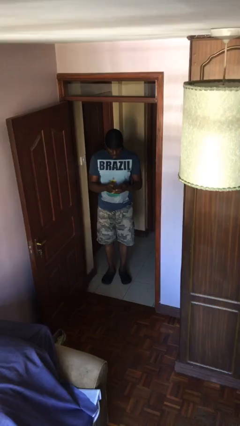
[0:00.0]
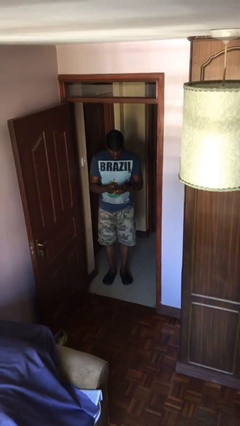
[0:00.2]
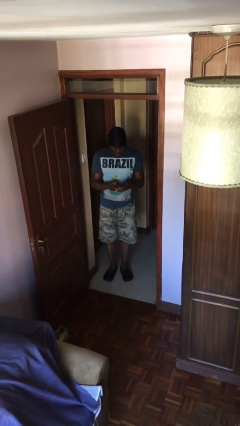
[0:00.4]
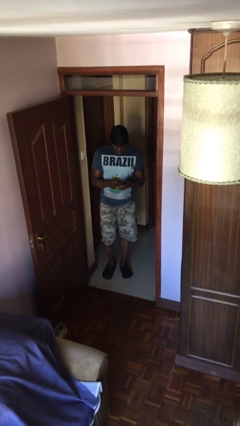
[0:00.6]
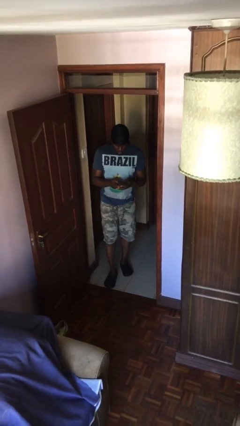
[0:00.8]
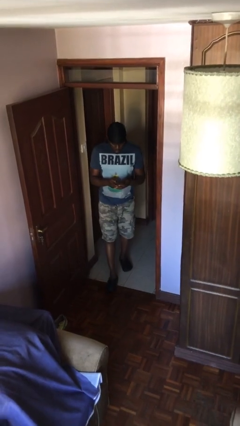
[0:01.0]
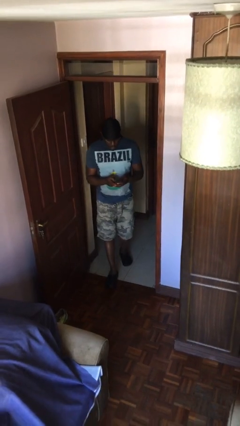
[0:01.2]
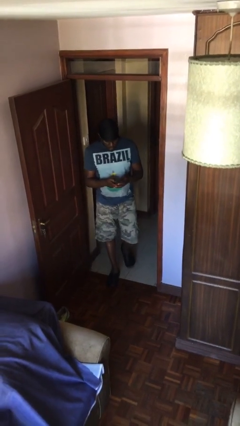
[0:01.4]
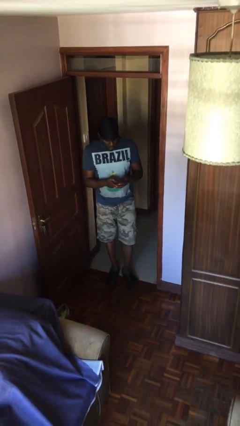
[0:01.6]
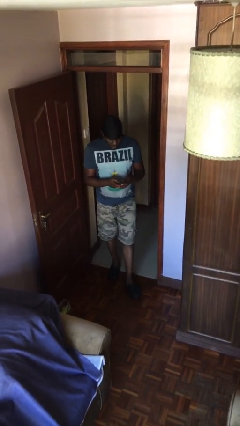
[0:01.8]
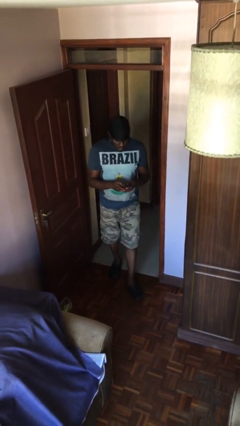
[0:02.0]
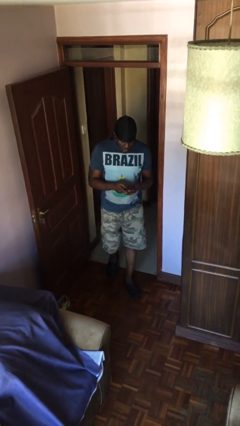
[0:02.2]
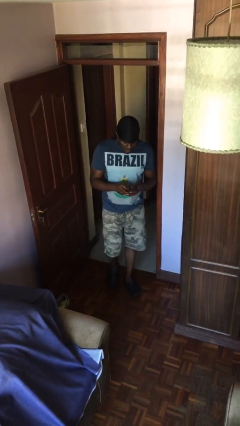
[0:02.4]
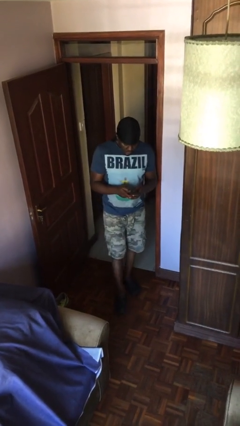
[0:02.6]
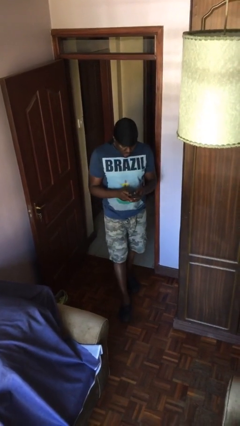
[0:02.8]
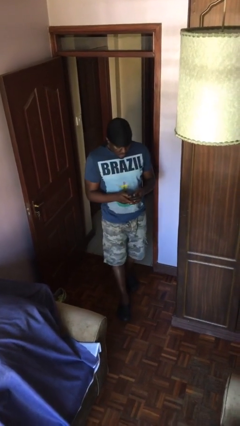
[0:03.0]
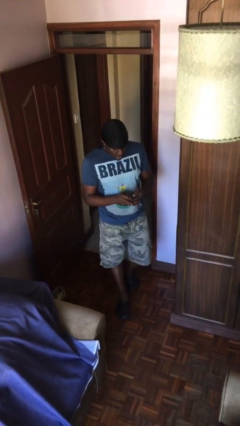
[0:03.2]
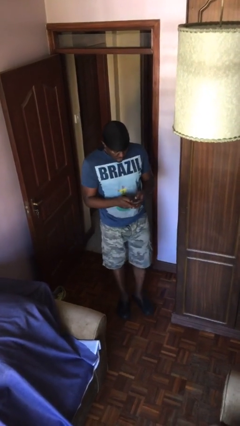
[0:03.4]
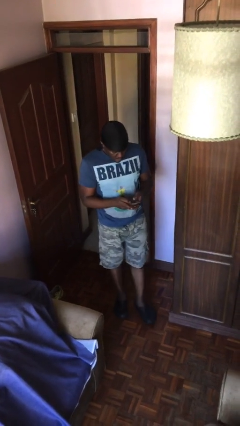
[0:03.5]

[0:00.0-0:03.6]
person enters scene through structure

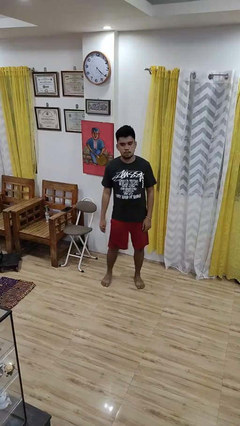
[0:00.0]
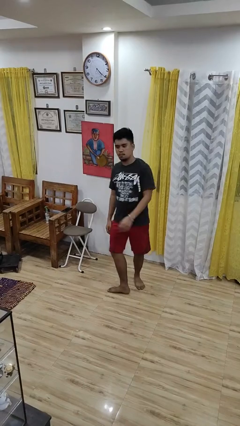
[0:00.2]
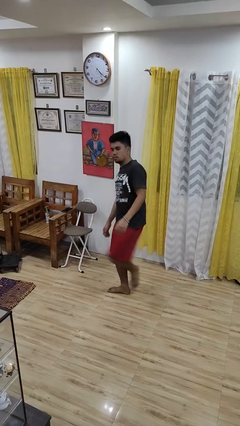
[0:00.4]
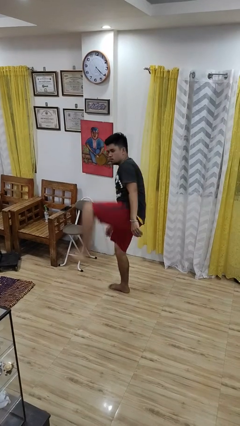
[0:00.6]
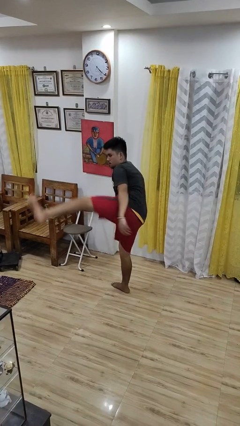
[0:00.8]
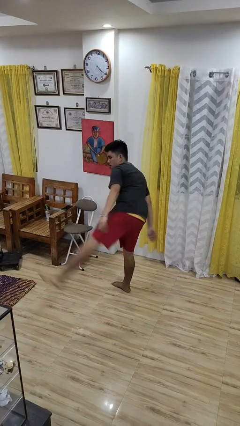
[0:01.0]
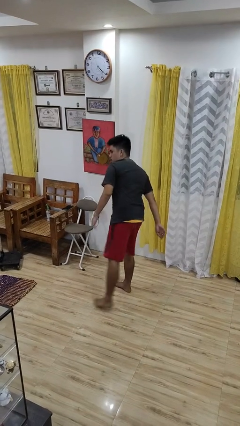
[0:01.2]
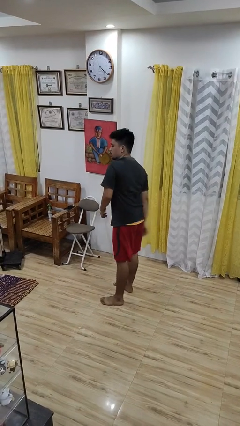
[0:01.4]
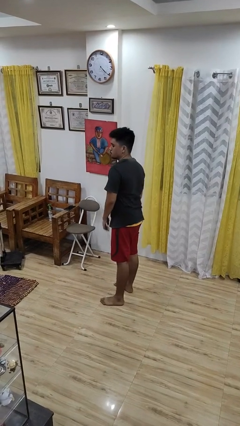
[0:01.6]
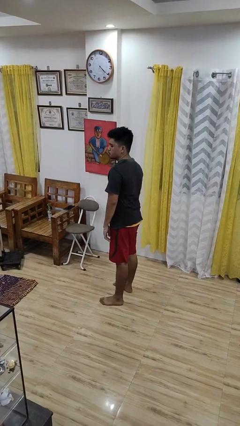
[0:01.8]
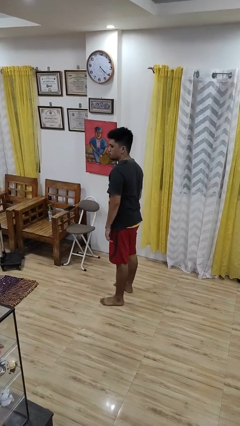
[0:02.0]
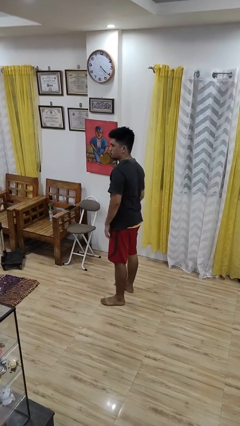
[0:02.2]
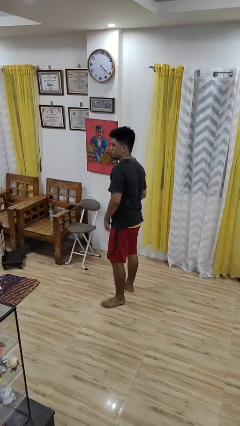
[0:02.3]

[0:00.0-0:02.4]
person karate kicks

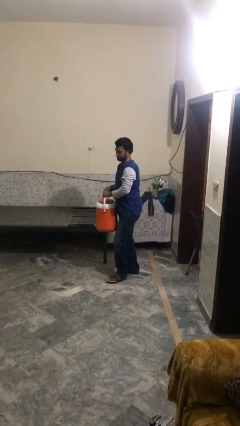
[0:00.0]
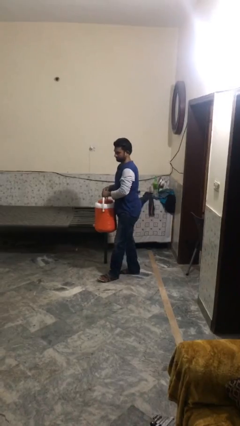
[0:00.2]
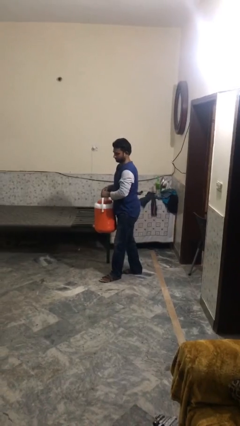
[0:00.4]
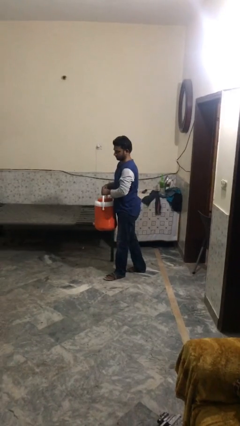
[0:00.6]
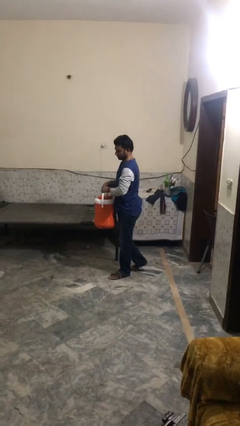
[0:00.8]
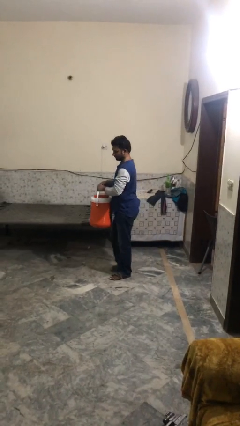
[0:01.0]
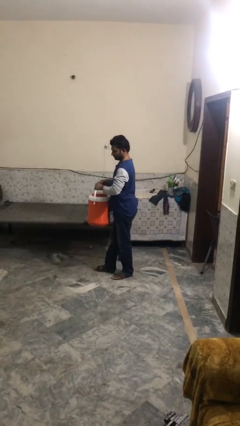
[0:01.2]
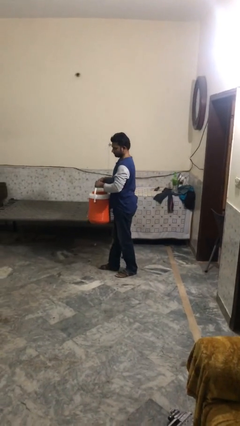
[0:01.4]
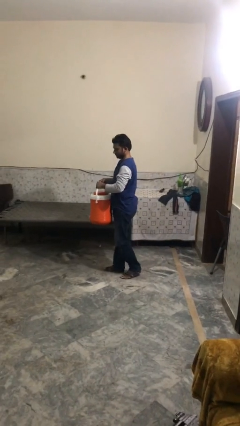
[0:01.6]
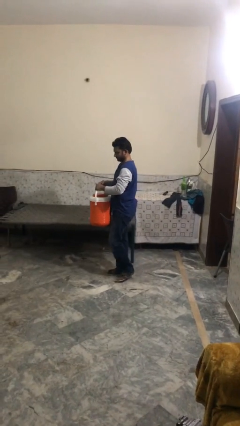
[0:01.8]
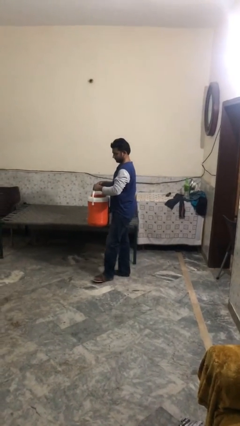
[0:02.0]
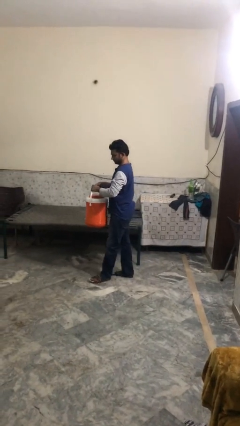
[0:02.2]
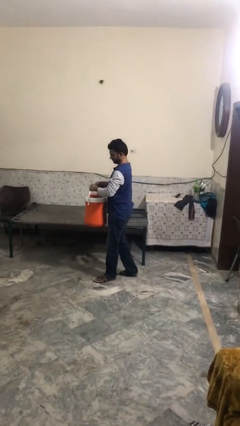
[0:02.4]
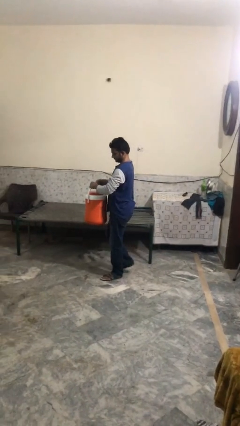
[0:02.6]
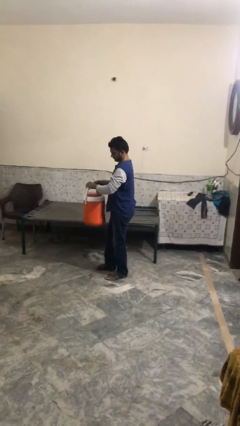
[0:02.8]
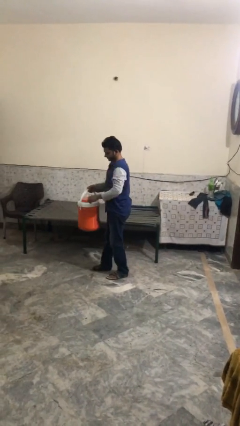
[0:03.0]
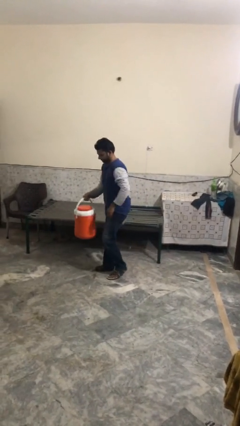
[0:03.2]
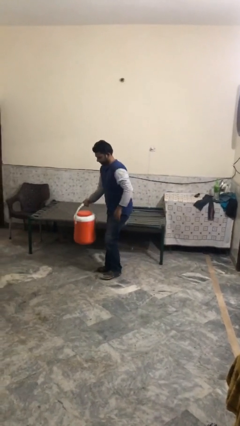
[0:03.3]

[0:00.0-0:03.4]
person carries heavy object

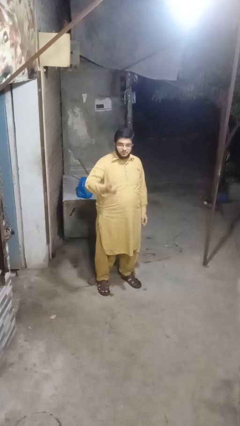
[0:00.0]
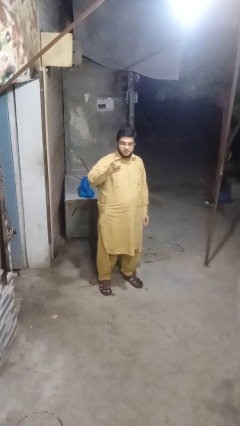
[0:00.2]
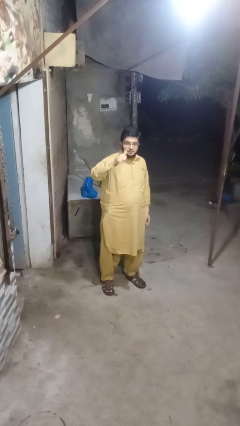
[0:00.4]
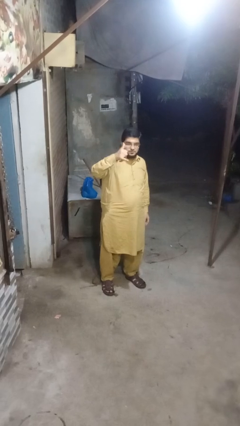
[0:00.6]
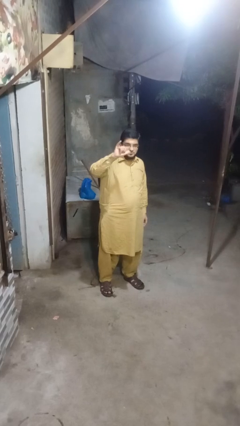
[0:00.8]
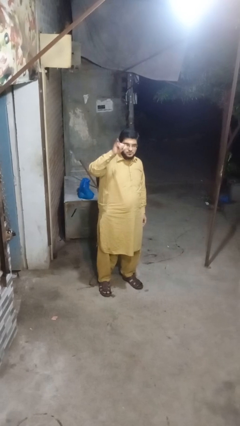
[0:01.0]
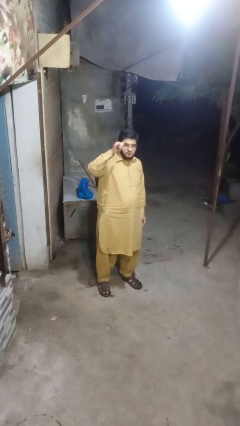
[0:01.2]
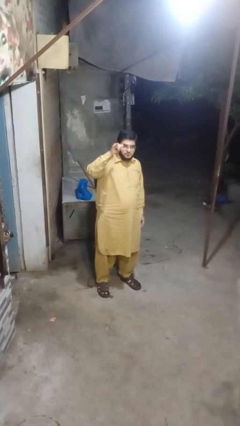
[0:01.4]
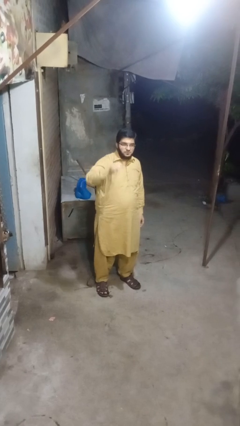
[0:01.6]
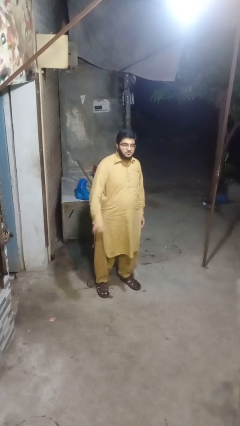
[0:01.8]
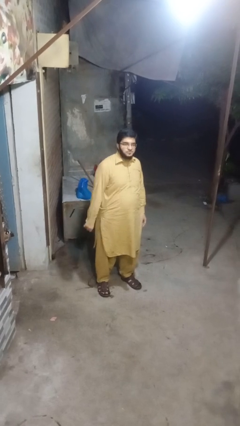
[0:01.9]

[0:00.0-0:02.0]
person gestures hang loose

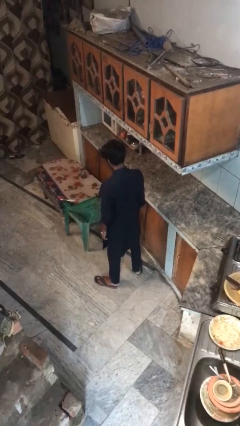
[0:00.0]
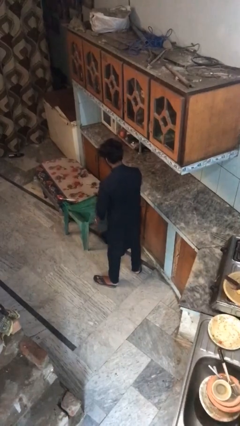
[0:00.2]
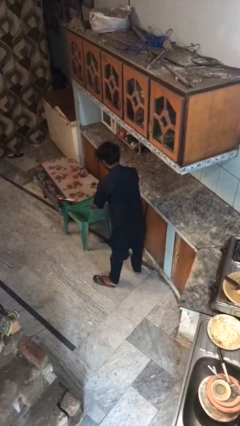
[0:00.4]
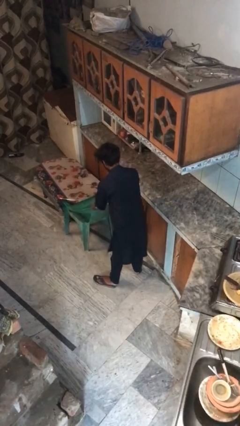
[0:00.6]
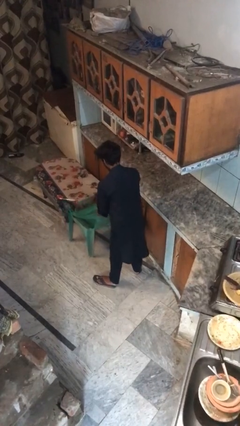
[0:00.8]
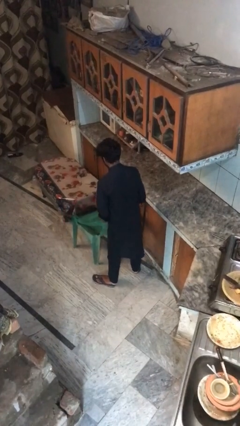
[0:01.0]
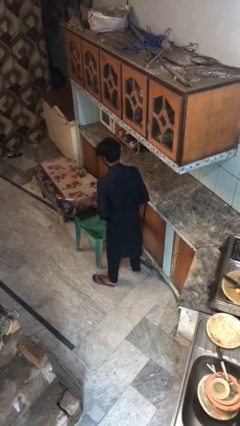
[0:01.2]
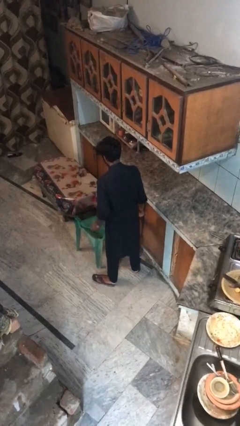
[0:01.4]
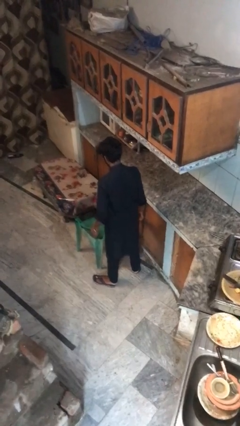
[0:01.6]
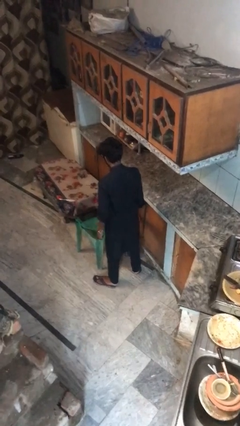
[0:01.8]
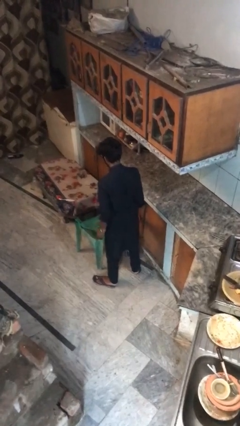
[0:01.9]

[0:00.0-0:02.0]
person pulls out chair

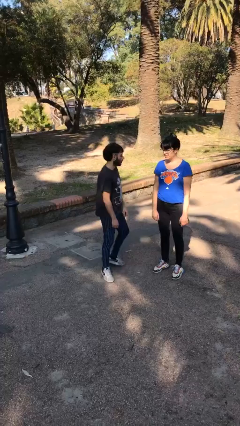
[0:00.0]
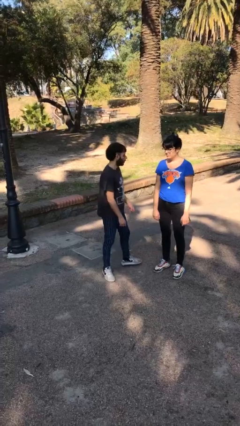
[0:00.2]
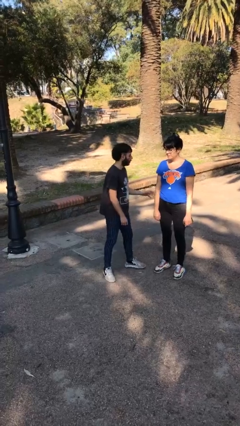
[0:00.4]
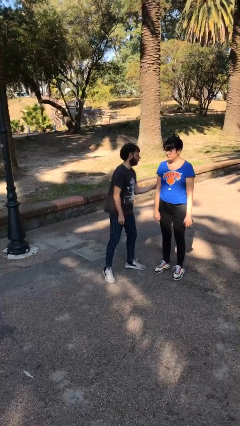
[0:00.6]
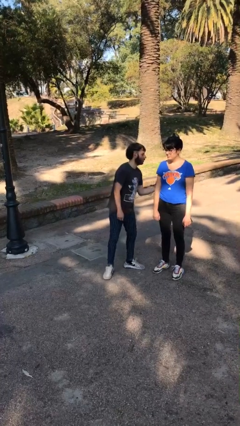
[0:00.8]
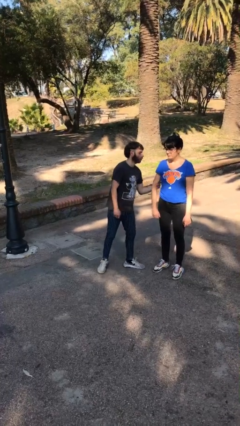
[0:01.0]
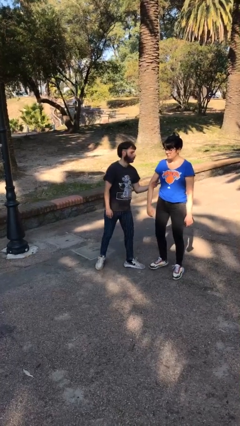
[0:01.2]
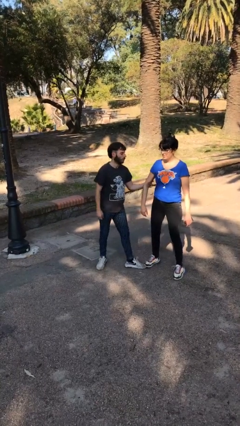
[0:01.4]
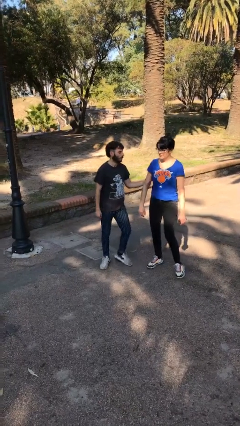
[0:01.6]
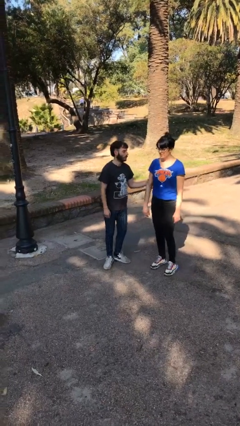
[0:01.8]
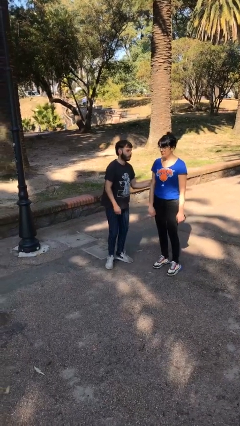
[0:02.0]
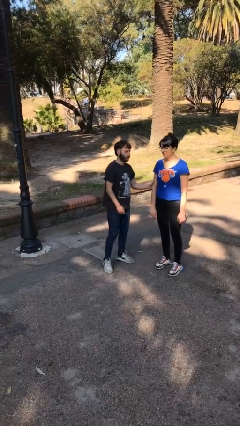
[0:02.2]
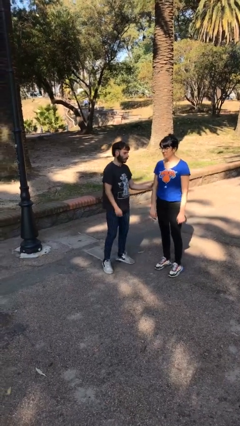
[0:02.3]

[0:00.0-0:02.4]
person grabs person by bicep

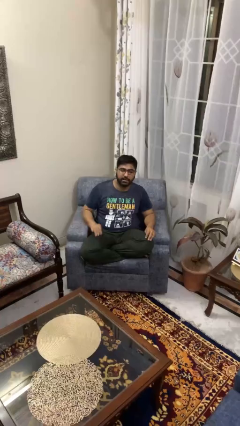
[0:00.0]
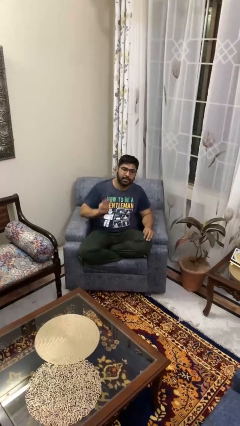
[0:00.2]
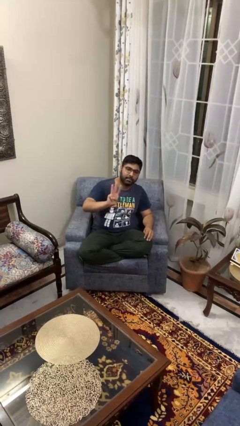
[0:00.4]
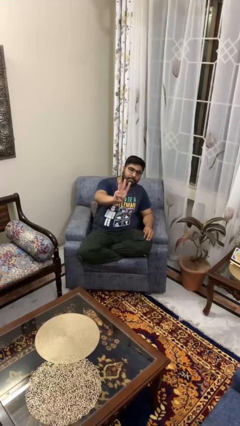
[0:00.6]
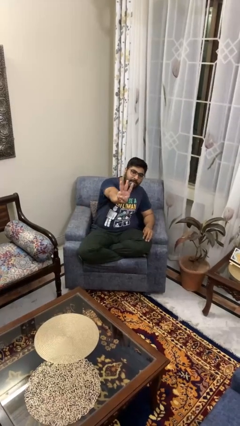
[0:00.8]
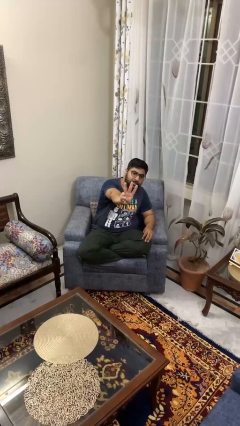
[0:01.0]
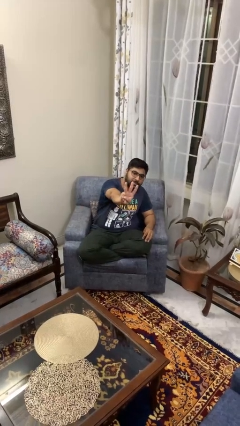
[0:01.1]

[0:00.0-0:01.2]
person gestures number three
